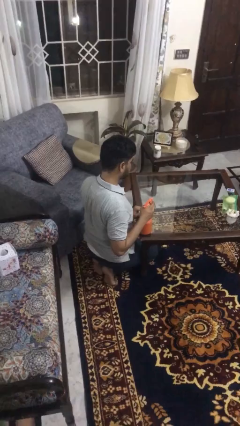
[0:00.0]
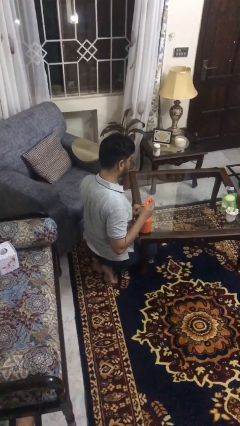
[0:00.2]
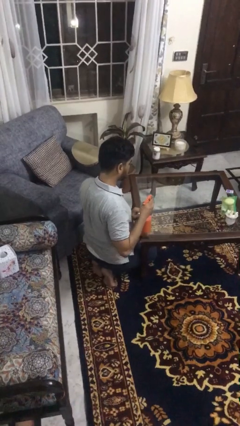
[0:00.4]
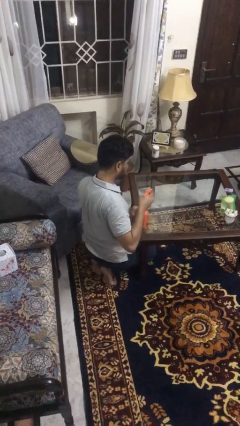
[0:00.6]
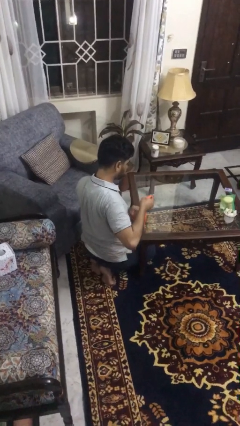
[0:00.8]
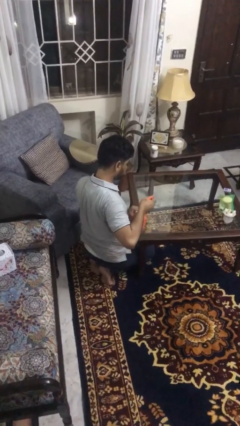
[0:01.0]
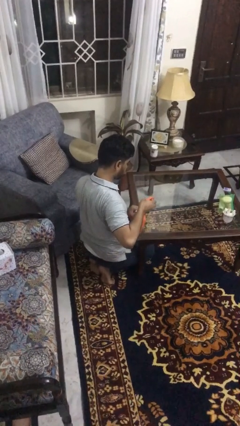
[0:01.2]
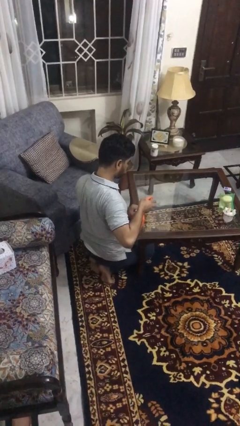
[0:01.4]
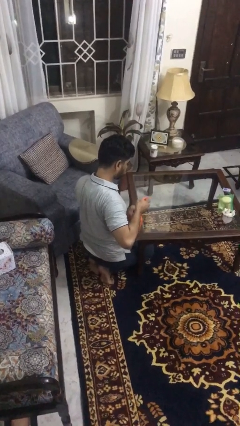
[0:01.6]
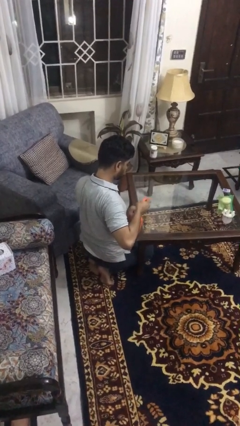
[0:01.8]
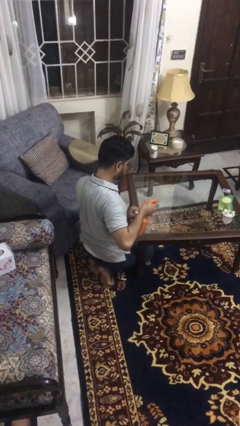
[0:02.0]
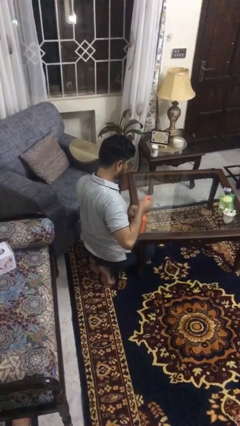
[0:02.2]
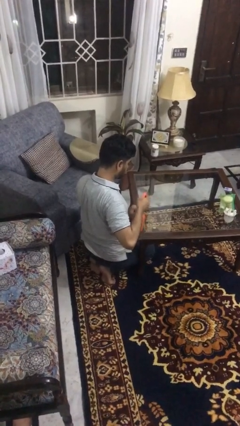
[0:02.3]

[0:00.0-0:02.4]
person sprays from bottle

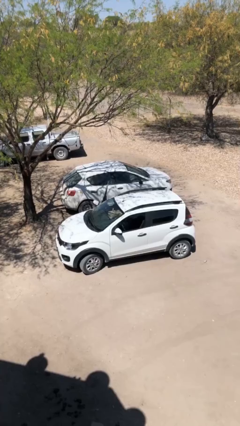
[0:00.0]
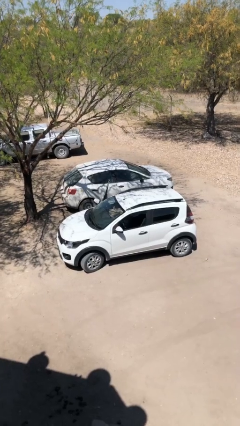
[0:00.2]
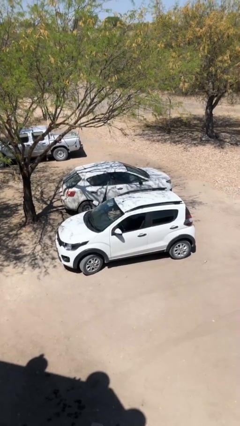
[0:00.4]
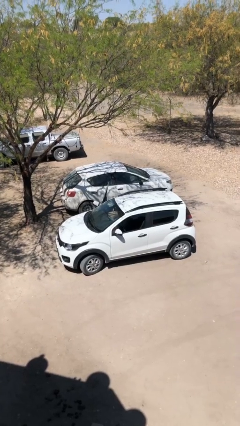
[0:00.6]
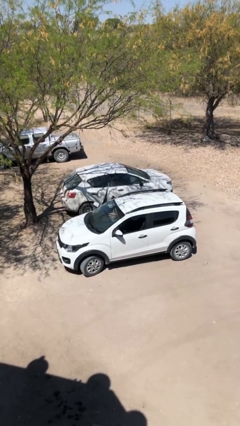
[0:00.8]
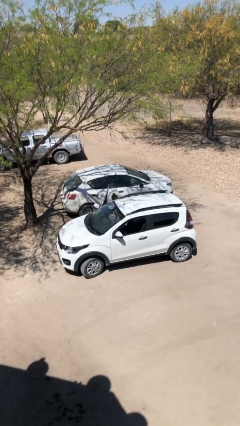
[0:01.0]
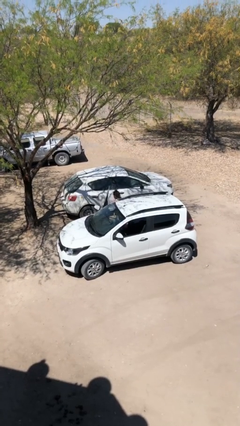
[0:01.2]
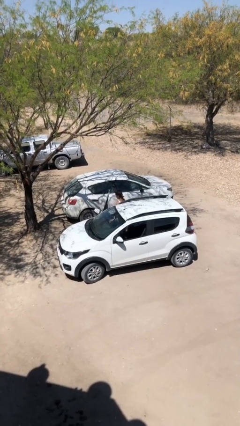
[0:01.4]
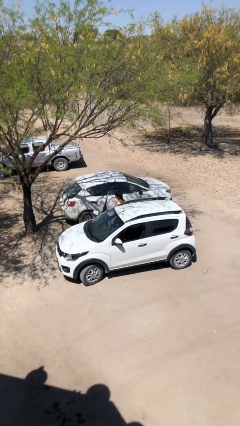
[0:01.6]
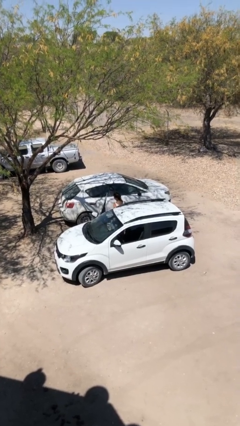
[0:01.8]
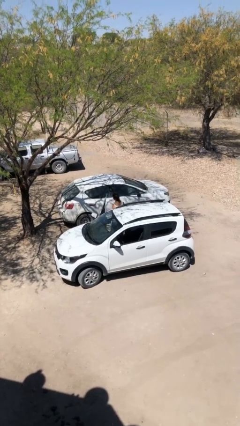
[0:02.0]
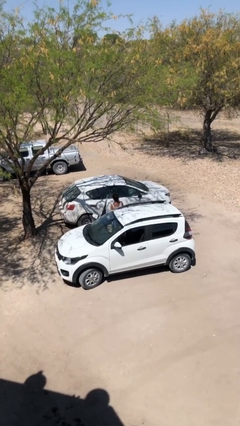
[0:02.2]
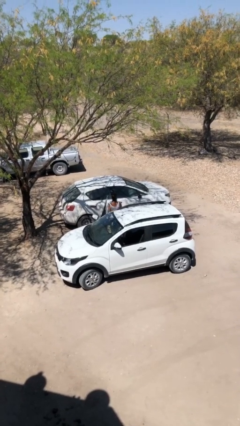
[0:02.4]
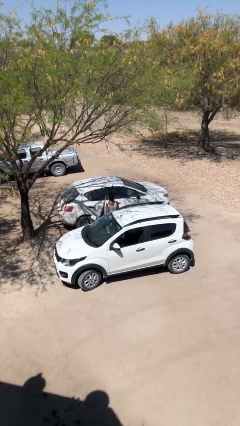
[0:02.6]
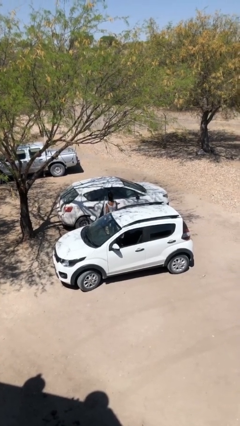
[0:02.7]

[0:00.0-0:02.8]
person exits car

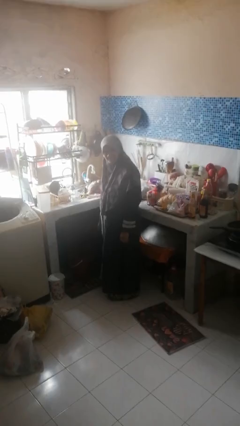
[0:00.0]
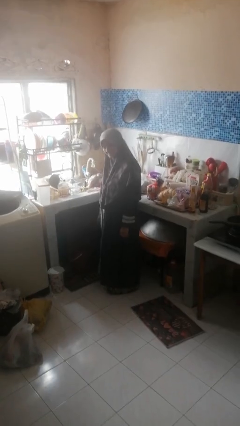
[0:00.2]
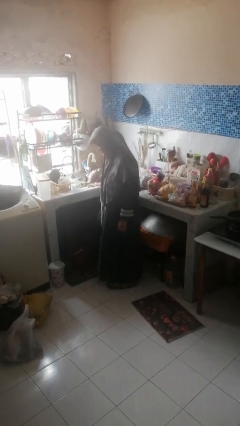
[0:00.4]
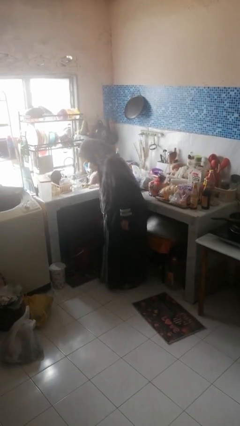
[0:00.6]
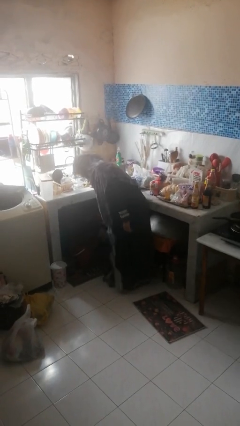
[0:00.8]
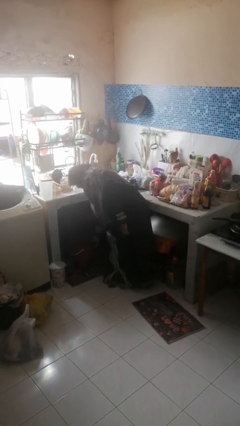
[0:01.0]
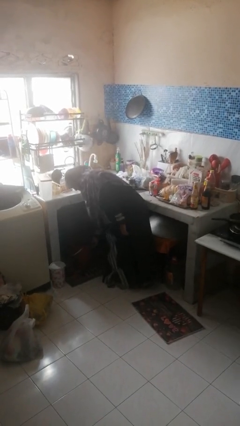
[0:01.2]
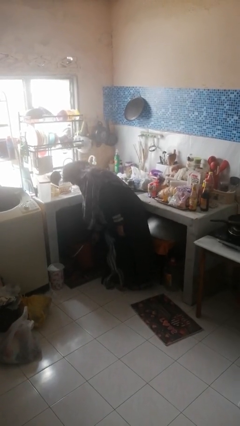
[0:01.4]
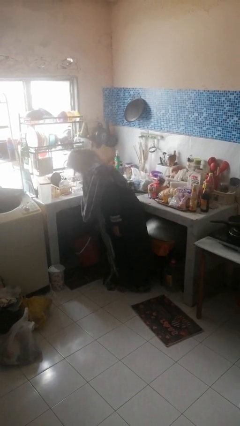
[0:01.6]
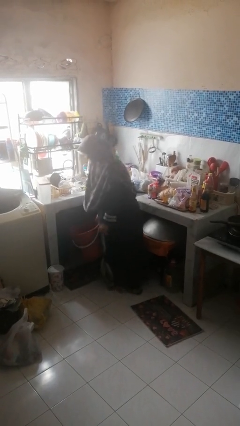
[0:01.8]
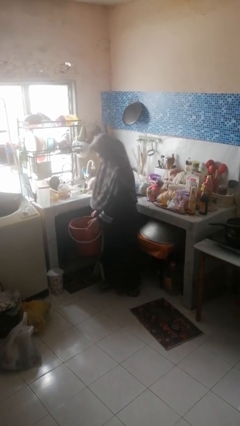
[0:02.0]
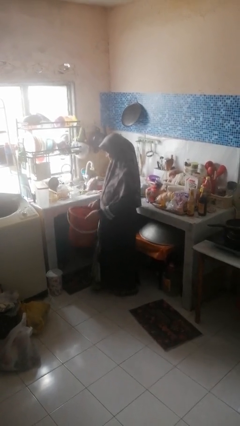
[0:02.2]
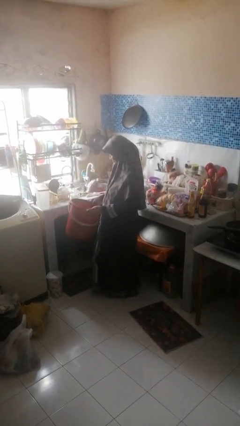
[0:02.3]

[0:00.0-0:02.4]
person picks up object from cabinet

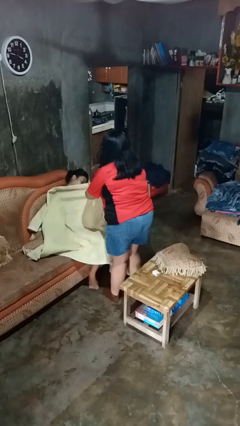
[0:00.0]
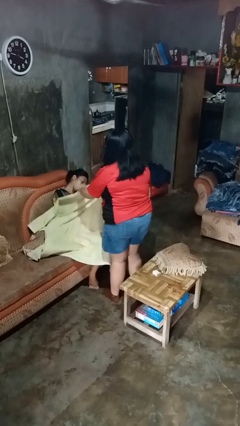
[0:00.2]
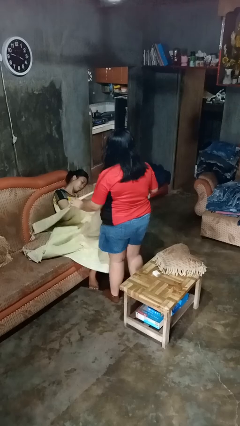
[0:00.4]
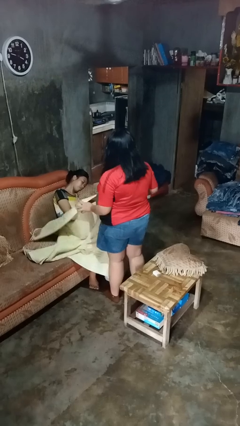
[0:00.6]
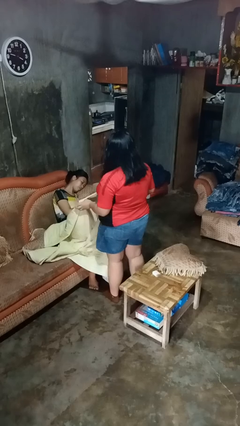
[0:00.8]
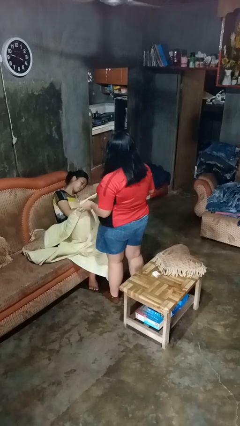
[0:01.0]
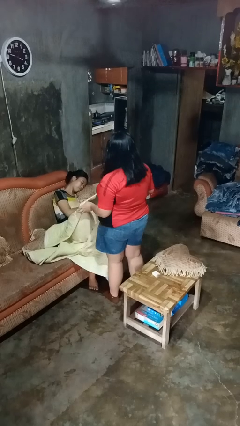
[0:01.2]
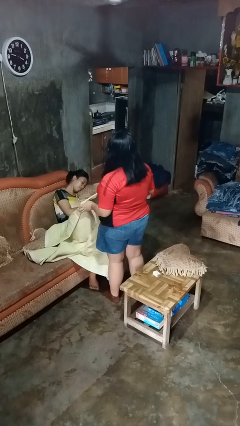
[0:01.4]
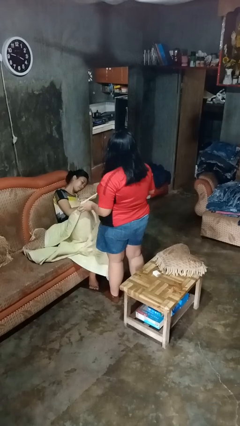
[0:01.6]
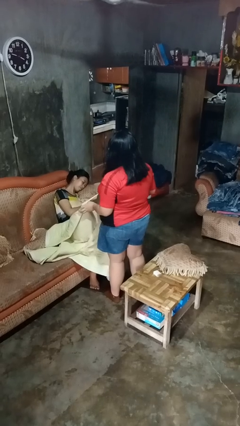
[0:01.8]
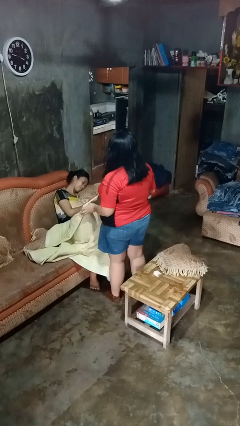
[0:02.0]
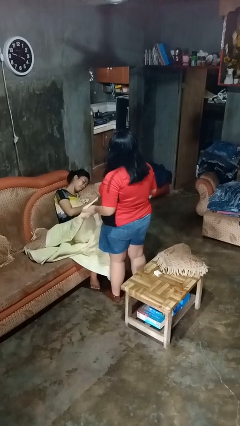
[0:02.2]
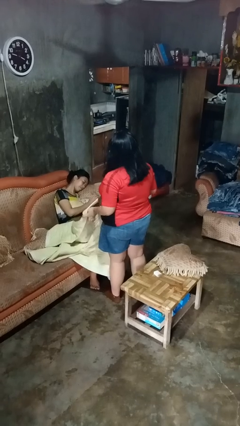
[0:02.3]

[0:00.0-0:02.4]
person uncovers friend with blanket

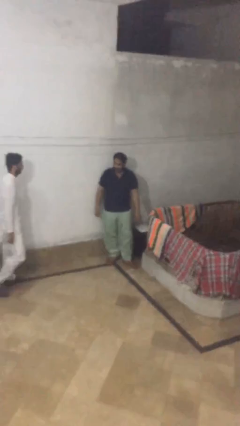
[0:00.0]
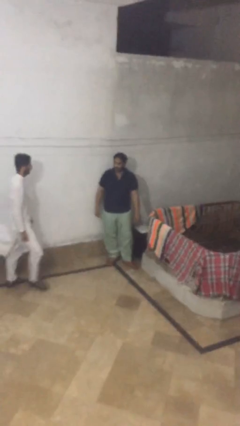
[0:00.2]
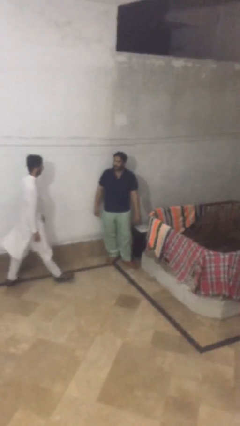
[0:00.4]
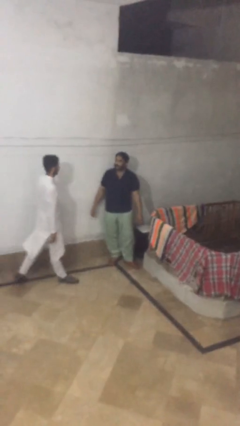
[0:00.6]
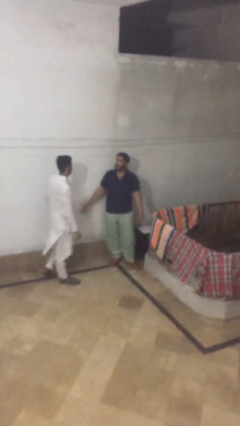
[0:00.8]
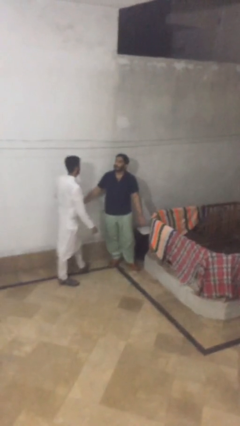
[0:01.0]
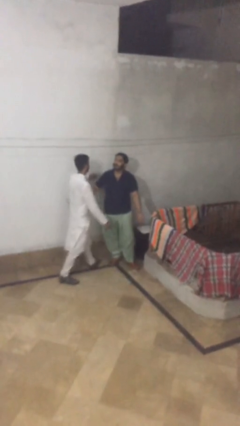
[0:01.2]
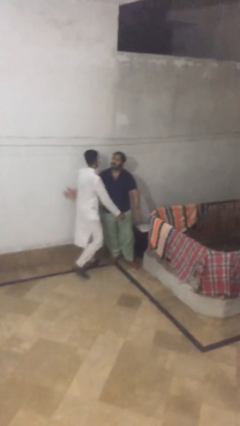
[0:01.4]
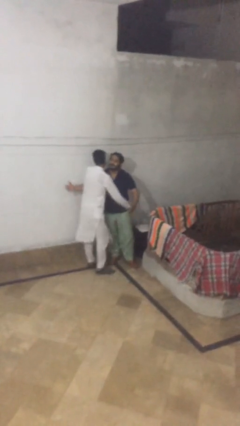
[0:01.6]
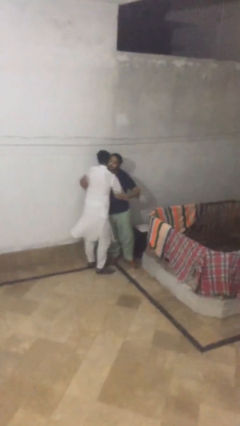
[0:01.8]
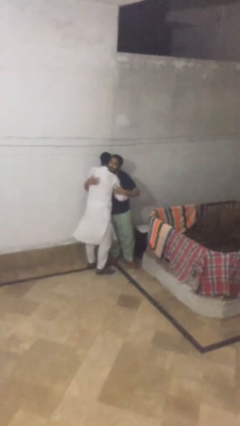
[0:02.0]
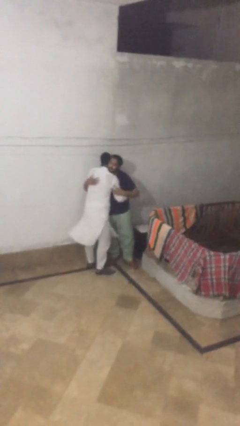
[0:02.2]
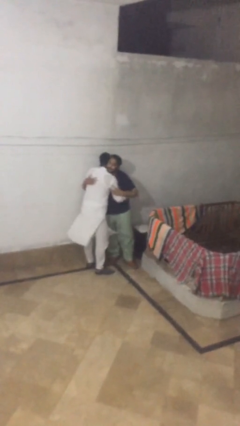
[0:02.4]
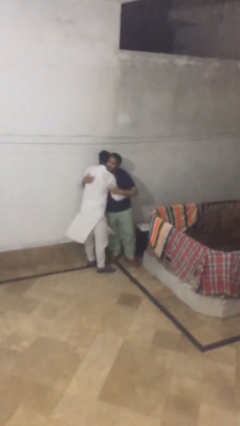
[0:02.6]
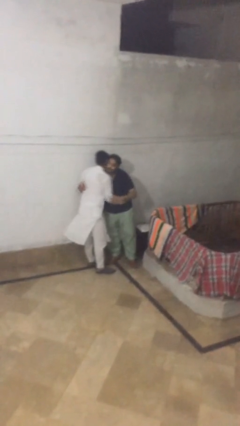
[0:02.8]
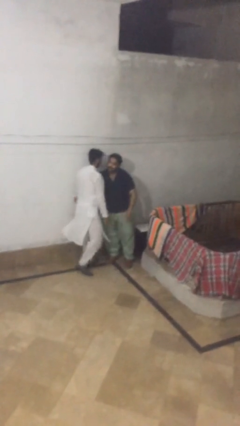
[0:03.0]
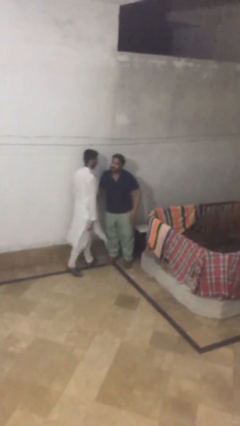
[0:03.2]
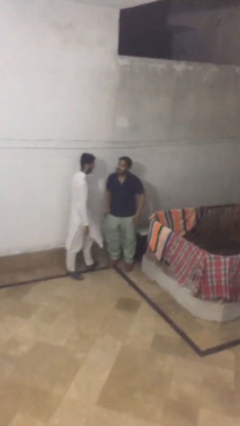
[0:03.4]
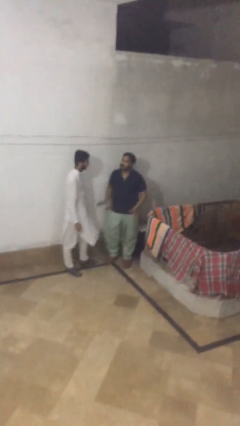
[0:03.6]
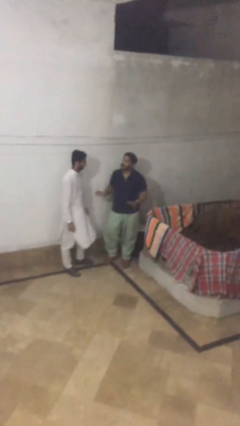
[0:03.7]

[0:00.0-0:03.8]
person embraces person

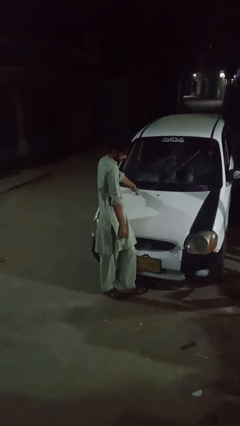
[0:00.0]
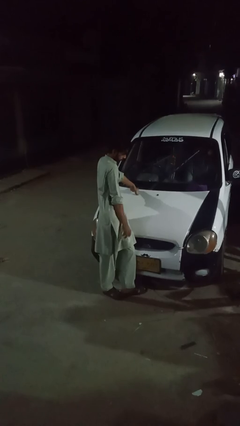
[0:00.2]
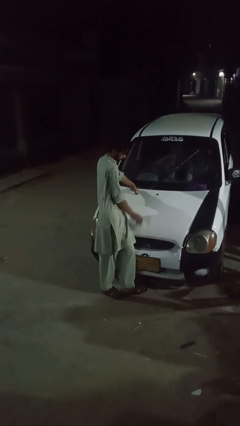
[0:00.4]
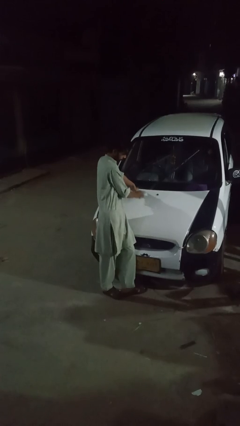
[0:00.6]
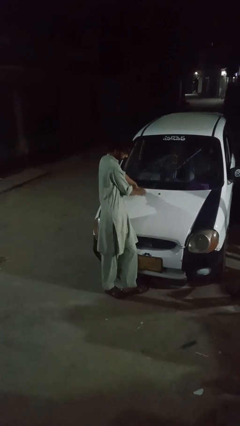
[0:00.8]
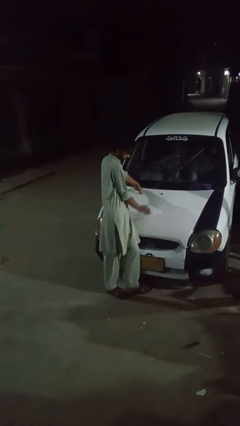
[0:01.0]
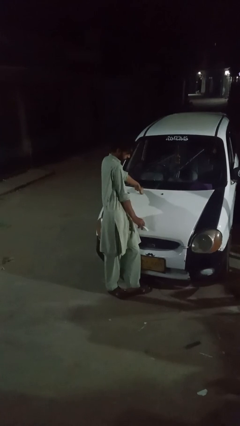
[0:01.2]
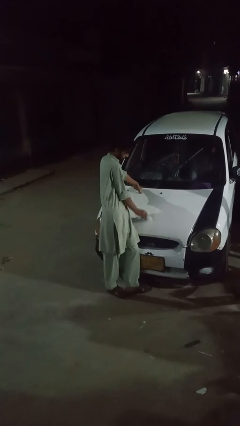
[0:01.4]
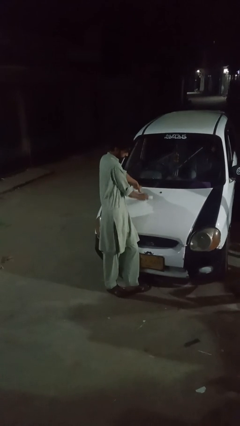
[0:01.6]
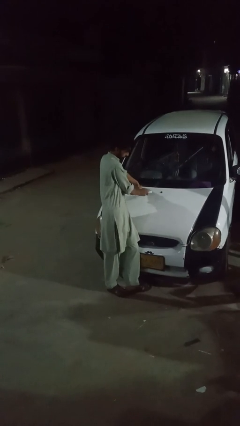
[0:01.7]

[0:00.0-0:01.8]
person polishes car with rag

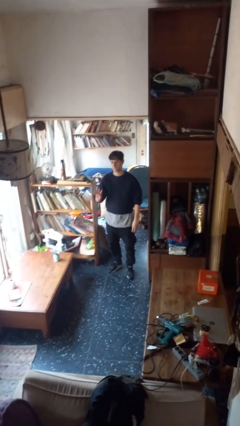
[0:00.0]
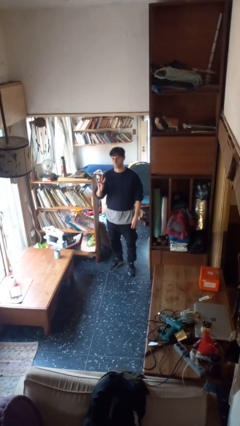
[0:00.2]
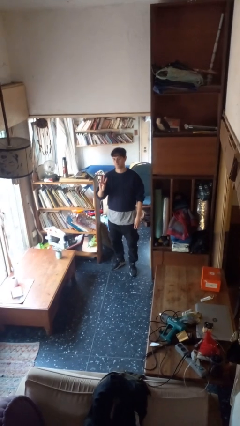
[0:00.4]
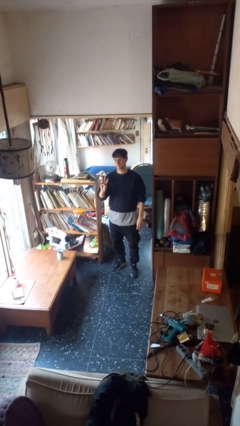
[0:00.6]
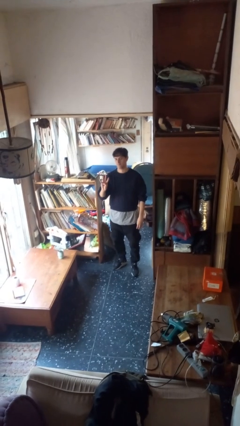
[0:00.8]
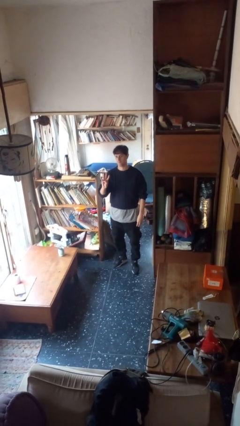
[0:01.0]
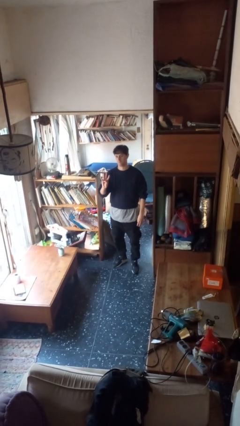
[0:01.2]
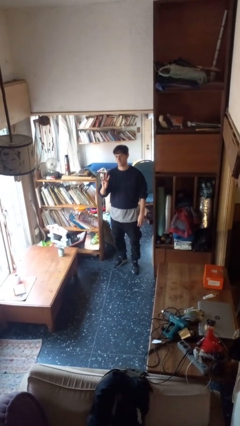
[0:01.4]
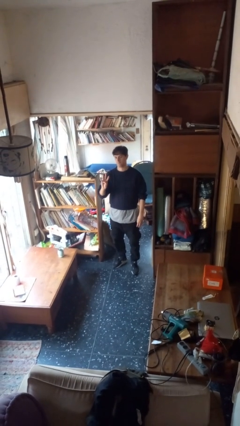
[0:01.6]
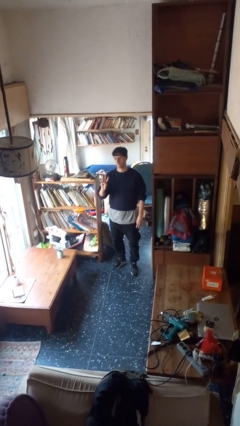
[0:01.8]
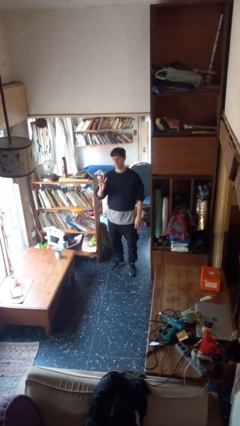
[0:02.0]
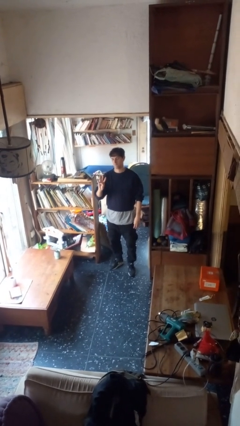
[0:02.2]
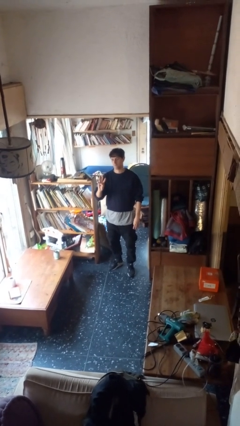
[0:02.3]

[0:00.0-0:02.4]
person gestures number four
